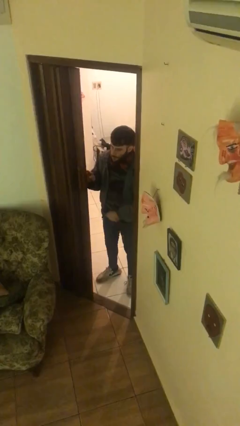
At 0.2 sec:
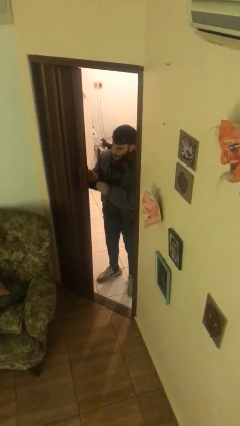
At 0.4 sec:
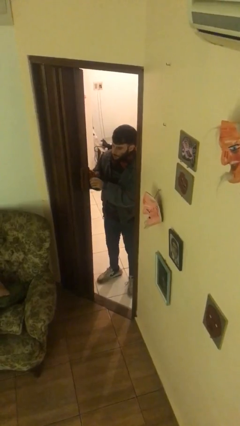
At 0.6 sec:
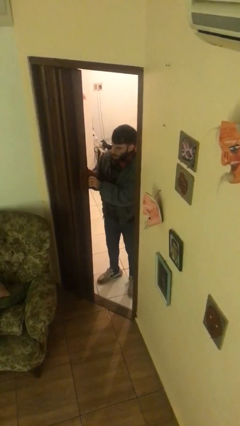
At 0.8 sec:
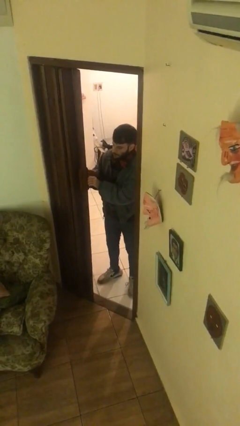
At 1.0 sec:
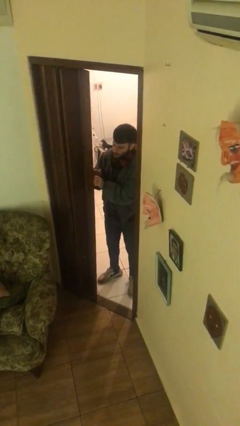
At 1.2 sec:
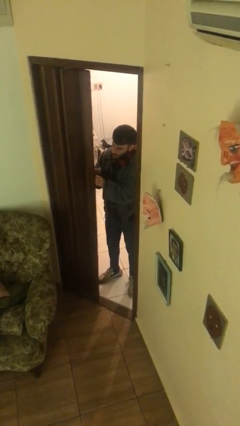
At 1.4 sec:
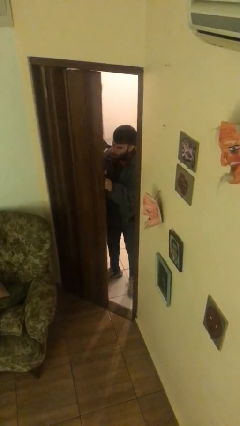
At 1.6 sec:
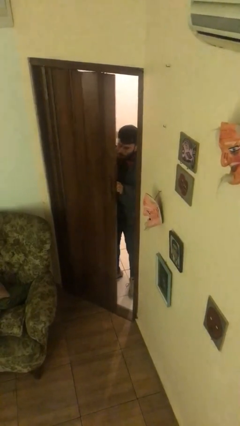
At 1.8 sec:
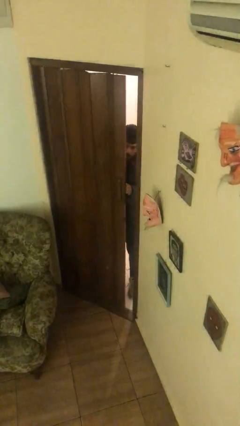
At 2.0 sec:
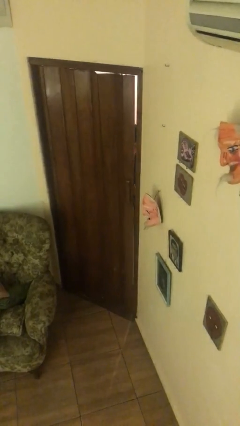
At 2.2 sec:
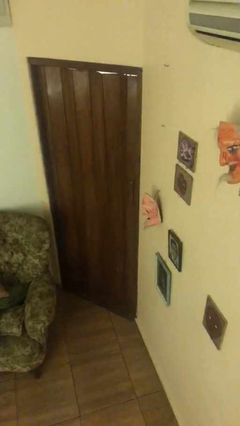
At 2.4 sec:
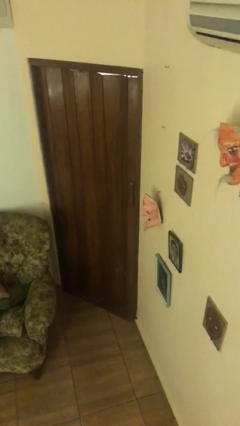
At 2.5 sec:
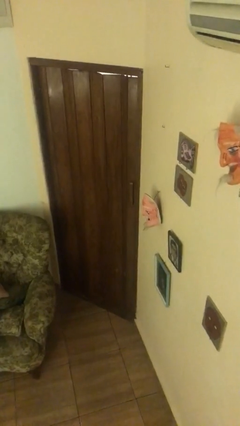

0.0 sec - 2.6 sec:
person closes sliding door

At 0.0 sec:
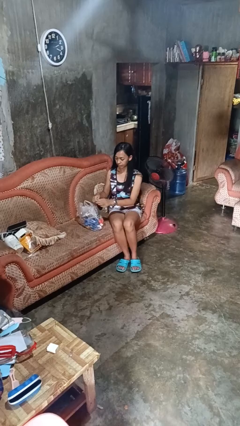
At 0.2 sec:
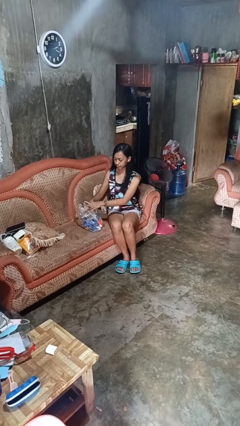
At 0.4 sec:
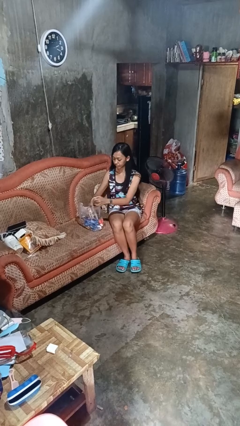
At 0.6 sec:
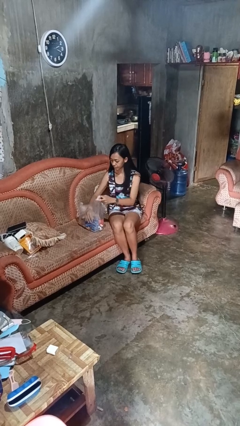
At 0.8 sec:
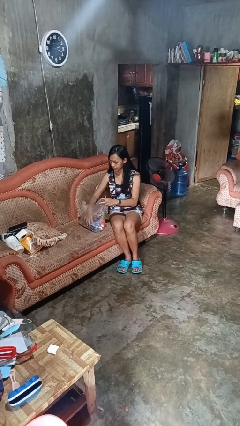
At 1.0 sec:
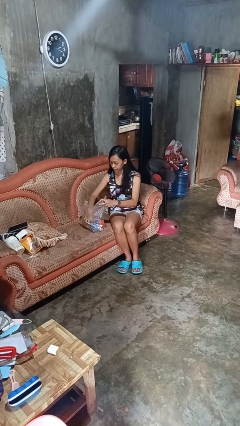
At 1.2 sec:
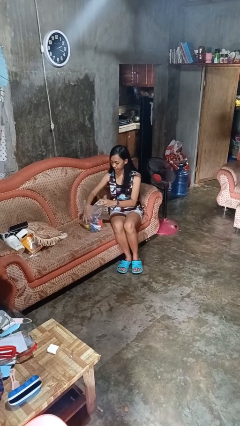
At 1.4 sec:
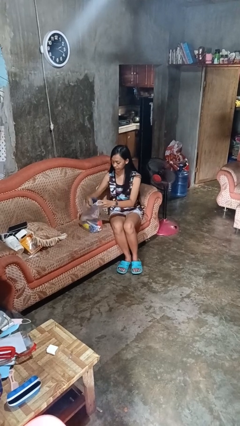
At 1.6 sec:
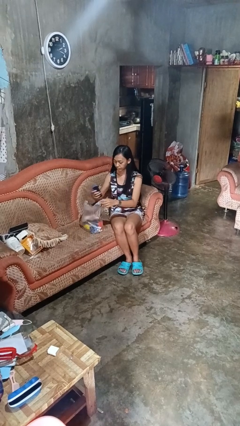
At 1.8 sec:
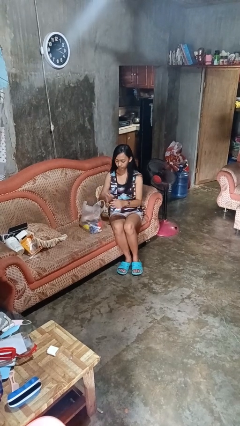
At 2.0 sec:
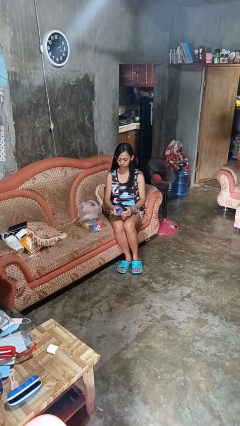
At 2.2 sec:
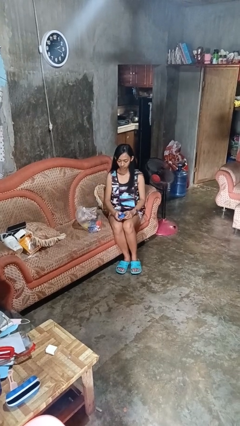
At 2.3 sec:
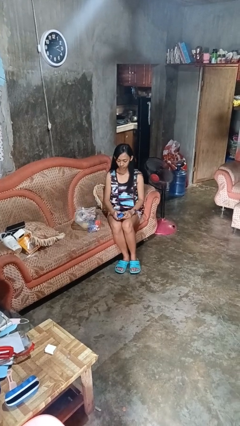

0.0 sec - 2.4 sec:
person takes object from bag

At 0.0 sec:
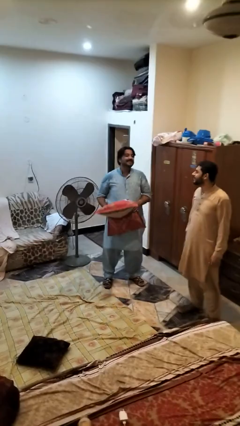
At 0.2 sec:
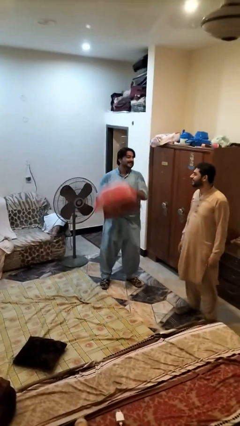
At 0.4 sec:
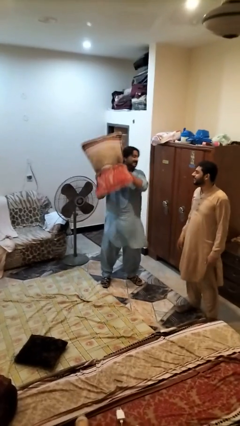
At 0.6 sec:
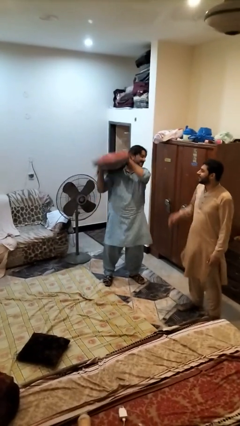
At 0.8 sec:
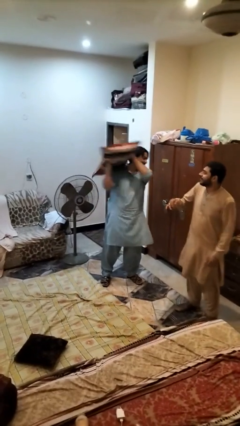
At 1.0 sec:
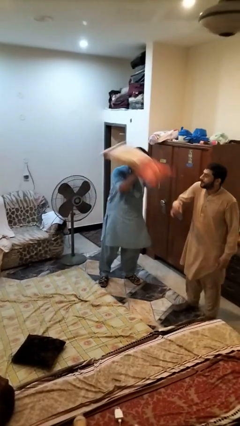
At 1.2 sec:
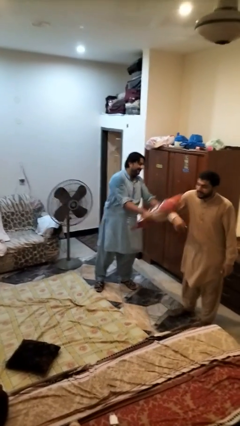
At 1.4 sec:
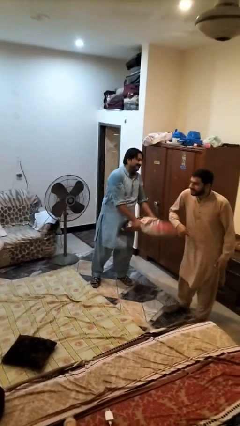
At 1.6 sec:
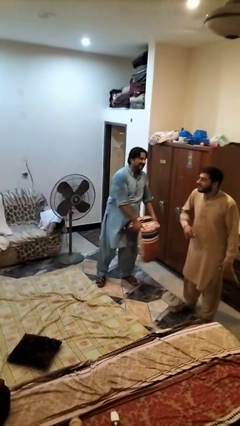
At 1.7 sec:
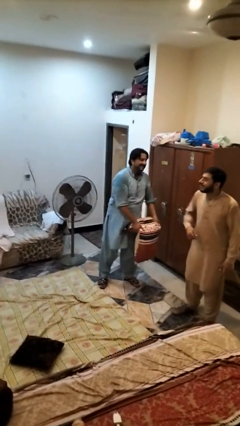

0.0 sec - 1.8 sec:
person hits person with pillow

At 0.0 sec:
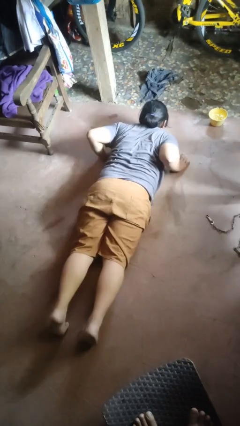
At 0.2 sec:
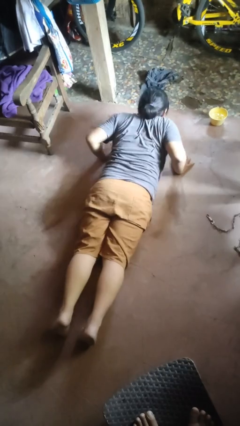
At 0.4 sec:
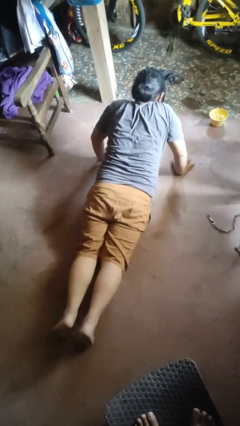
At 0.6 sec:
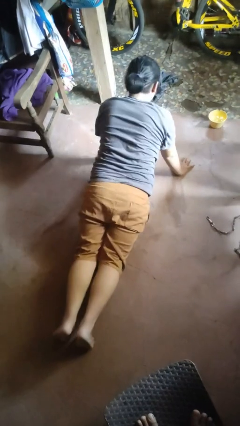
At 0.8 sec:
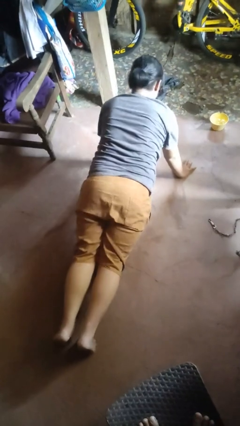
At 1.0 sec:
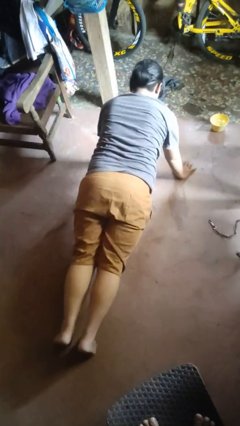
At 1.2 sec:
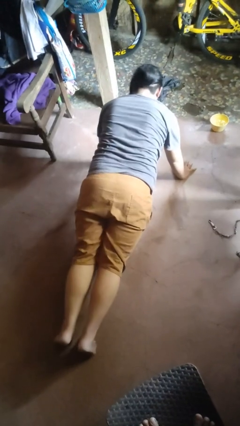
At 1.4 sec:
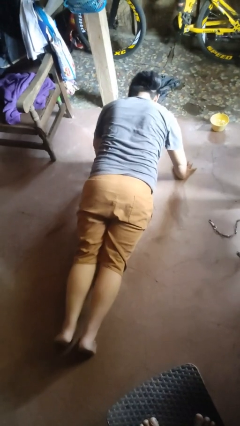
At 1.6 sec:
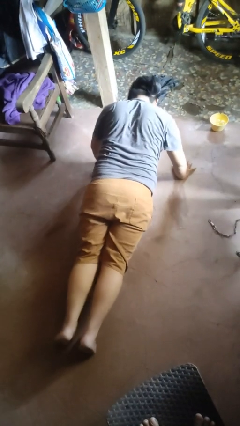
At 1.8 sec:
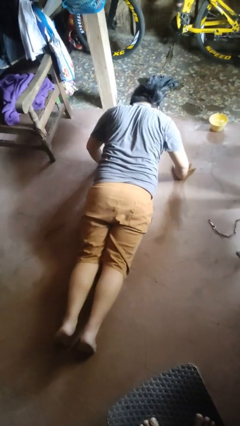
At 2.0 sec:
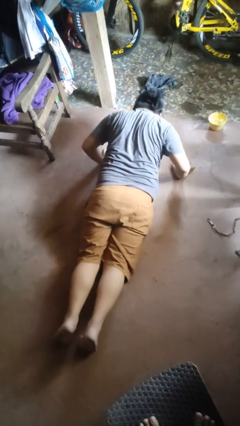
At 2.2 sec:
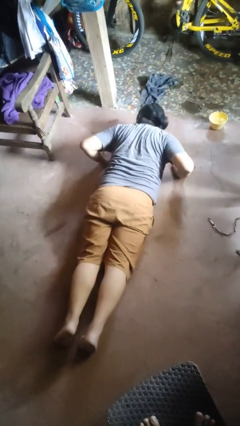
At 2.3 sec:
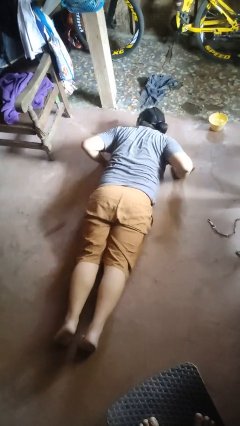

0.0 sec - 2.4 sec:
person exercises with pushup

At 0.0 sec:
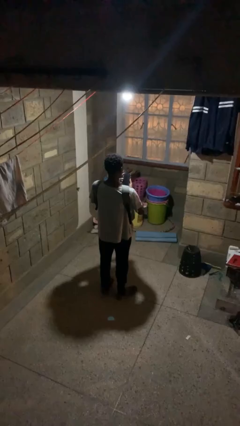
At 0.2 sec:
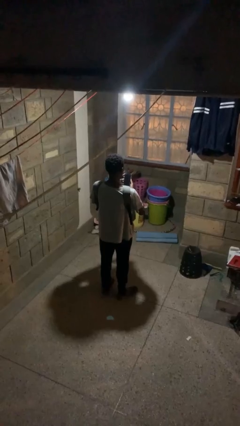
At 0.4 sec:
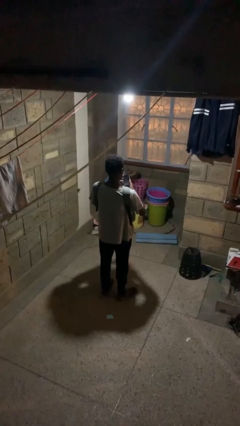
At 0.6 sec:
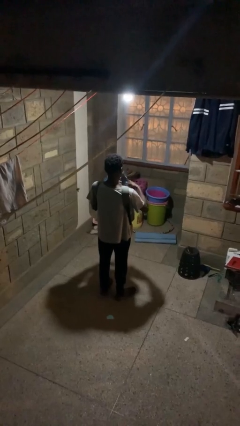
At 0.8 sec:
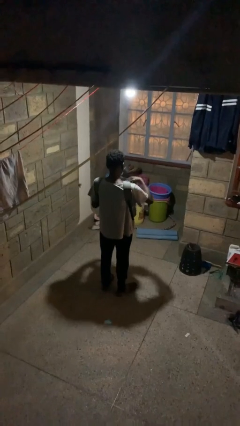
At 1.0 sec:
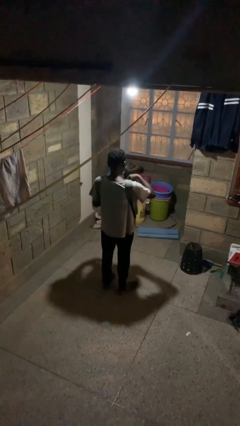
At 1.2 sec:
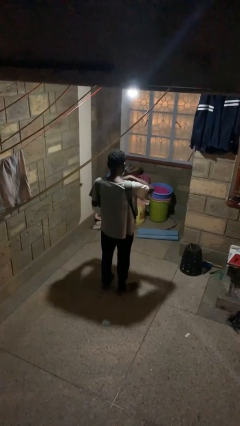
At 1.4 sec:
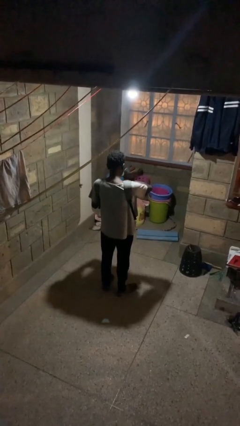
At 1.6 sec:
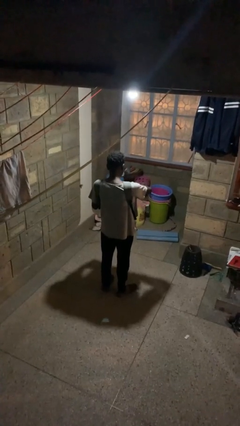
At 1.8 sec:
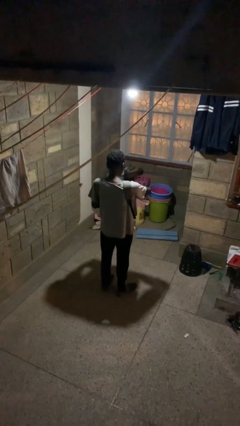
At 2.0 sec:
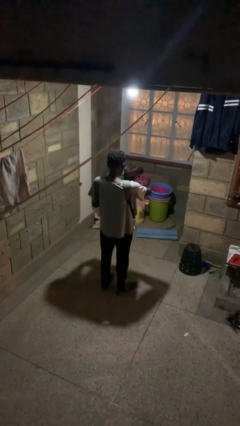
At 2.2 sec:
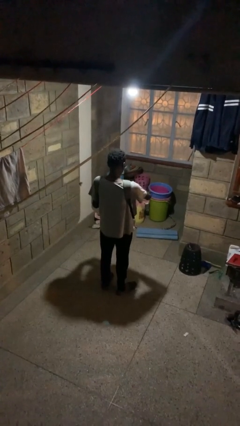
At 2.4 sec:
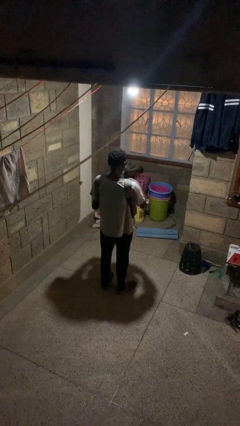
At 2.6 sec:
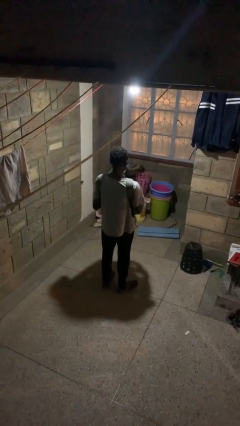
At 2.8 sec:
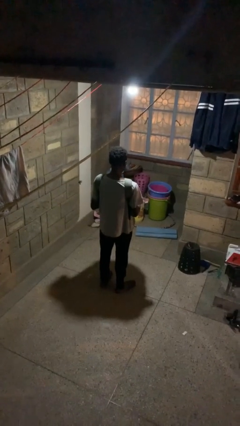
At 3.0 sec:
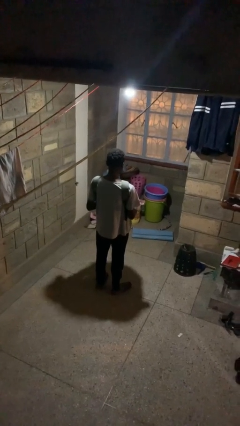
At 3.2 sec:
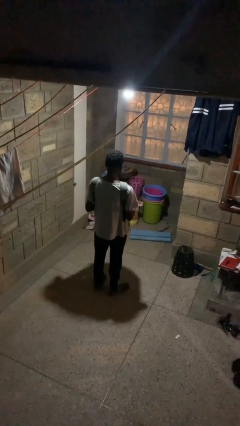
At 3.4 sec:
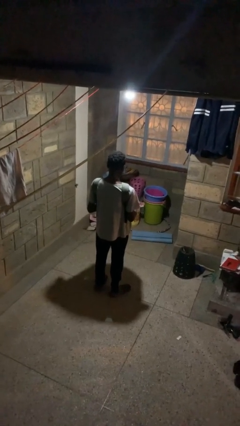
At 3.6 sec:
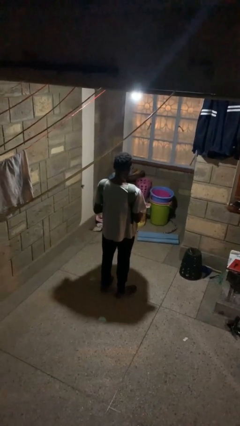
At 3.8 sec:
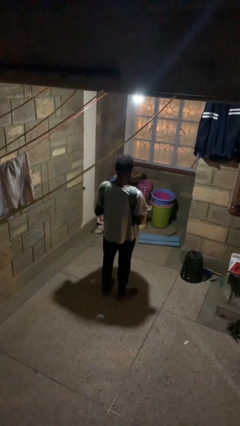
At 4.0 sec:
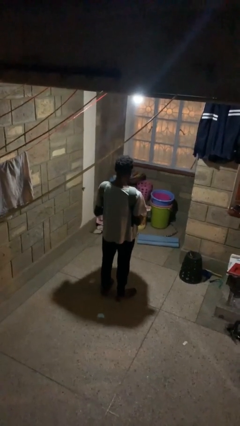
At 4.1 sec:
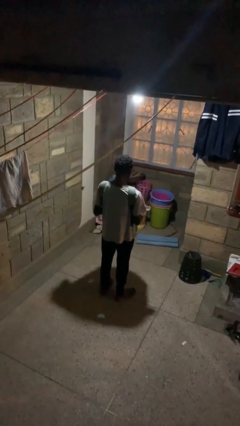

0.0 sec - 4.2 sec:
person puts object into backpack

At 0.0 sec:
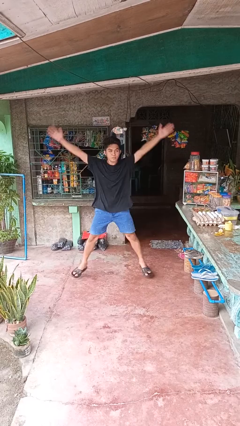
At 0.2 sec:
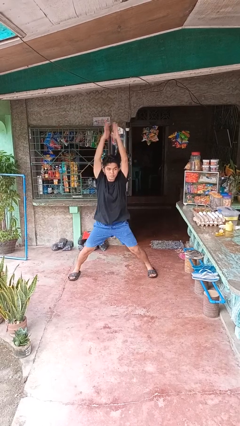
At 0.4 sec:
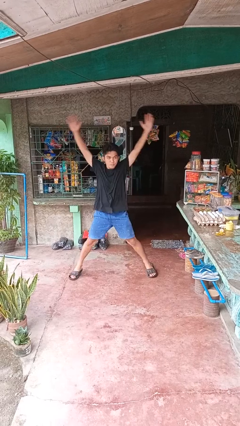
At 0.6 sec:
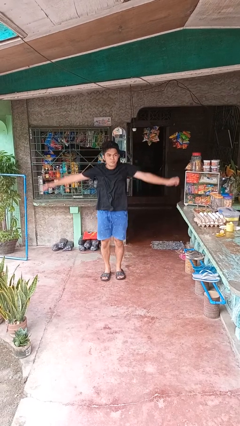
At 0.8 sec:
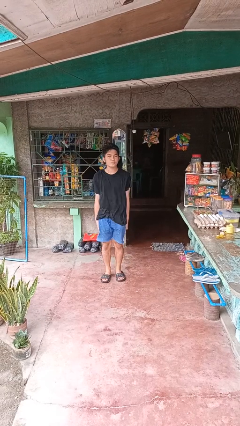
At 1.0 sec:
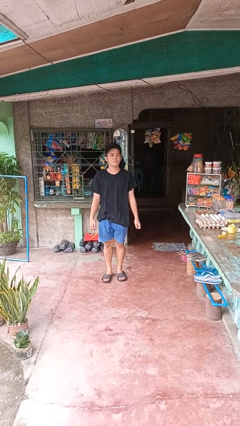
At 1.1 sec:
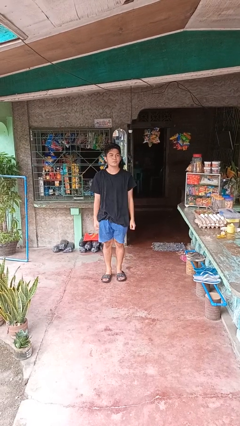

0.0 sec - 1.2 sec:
person exercises with jumping jacks

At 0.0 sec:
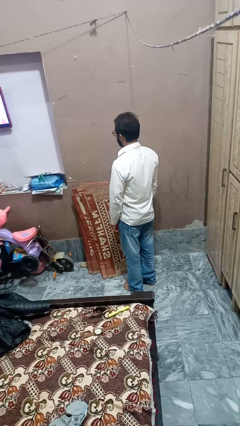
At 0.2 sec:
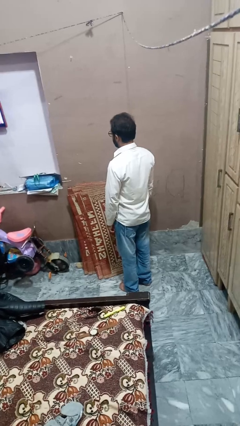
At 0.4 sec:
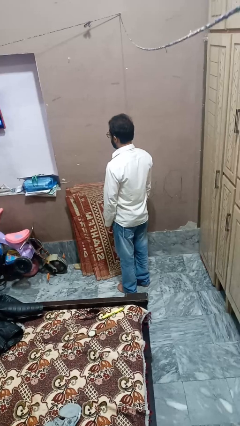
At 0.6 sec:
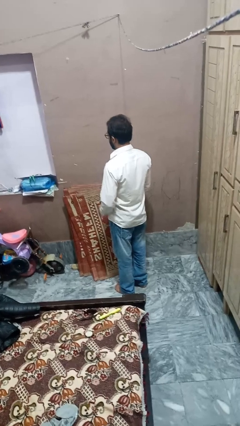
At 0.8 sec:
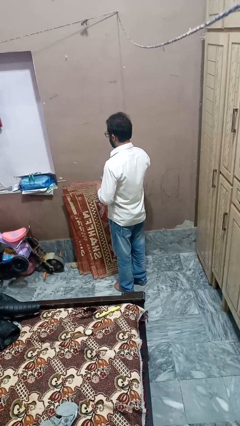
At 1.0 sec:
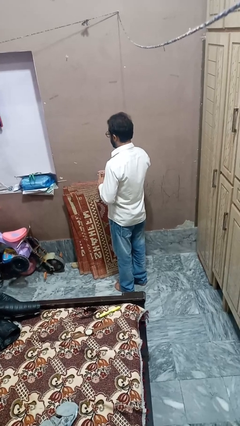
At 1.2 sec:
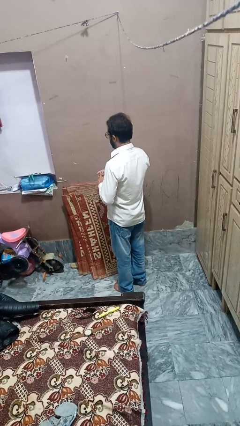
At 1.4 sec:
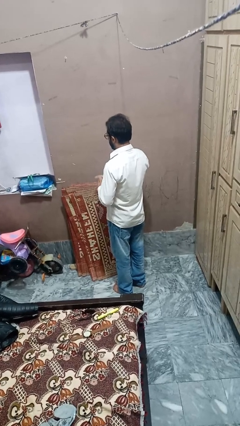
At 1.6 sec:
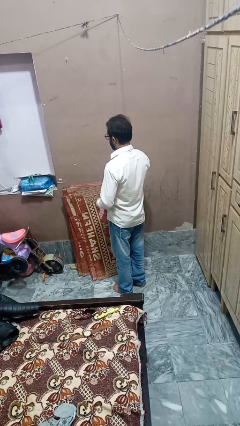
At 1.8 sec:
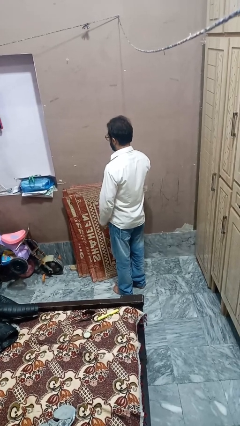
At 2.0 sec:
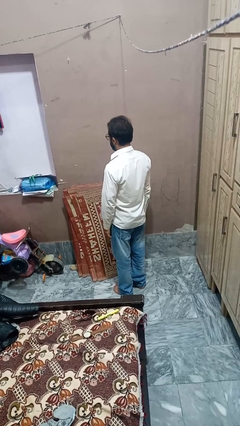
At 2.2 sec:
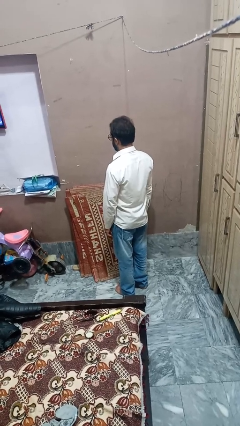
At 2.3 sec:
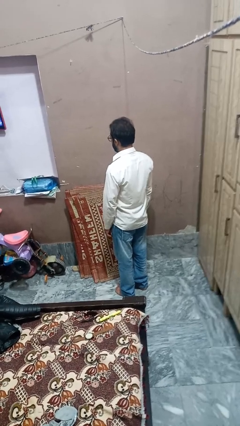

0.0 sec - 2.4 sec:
person puts on ring
